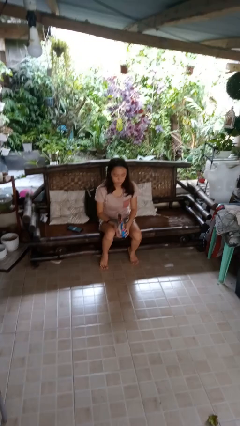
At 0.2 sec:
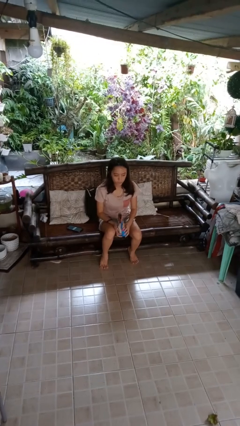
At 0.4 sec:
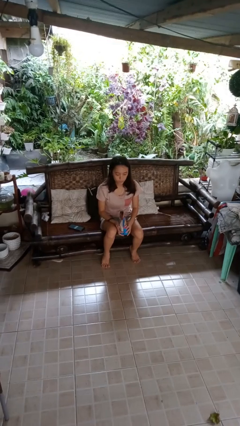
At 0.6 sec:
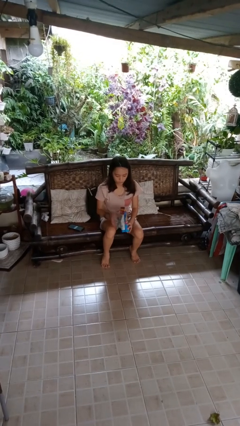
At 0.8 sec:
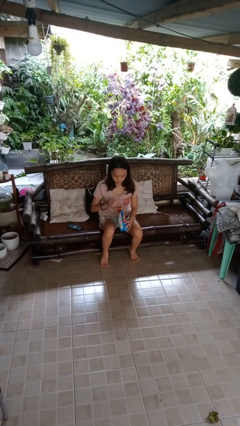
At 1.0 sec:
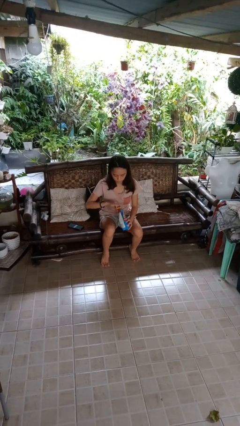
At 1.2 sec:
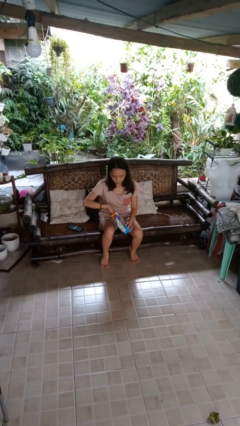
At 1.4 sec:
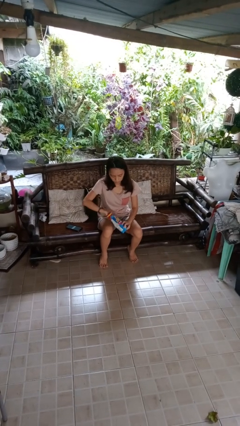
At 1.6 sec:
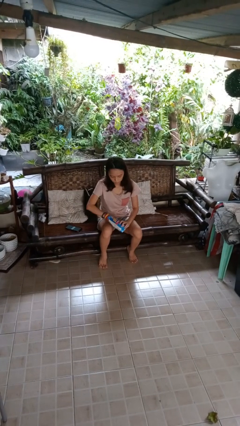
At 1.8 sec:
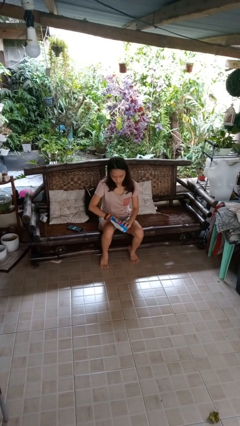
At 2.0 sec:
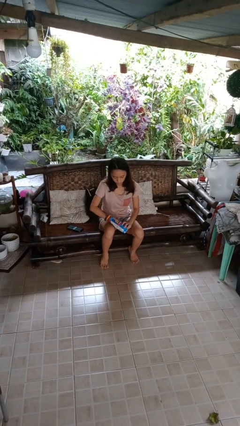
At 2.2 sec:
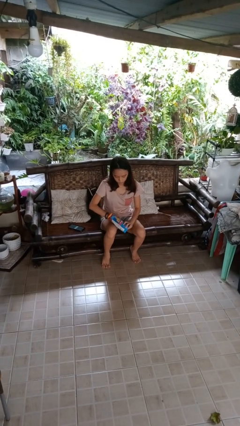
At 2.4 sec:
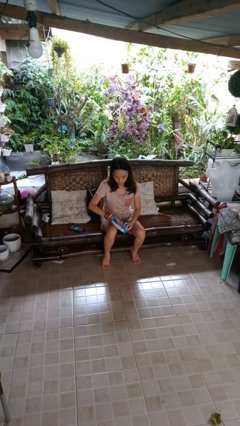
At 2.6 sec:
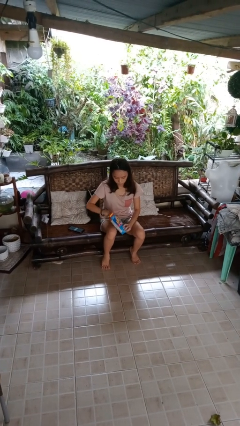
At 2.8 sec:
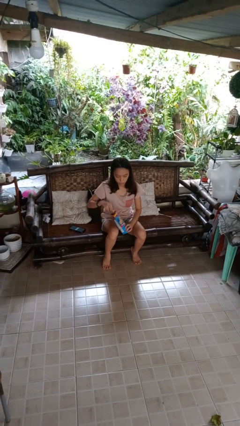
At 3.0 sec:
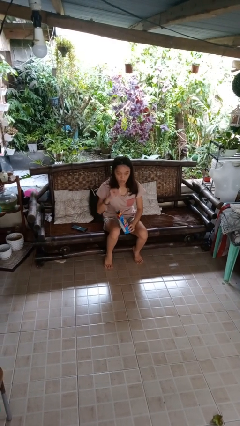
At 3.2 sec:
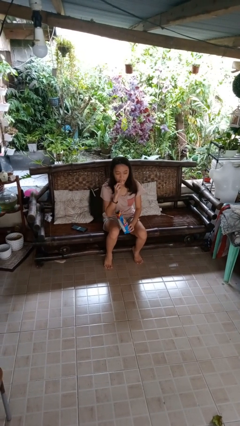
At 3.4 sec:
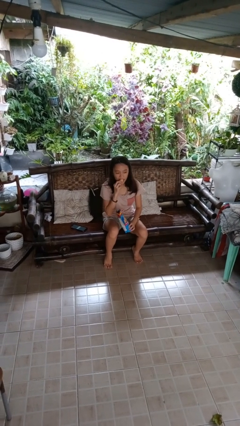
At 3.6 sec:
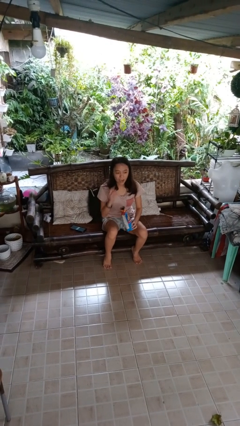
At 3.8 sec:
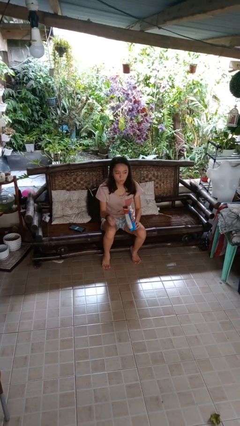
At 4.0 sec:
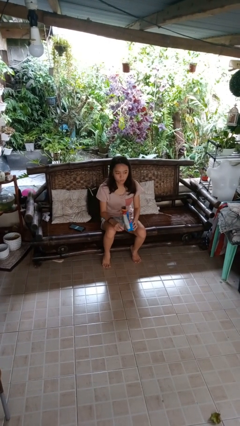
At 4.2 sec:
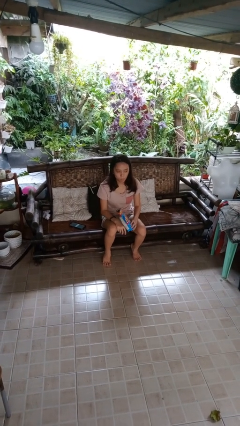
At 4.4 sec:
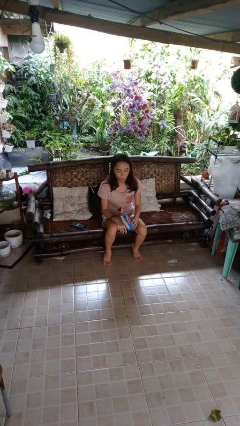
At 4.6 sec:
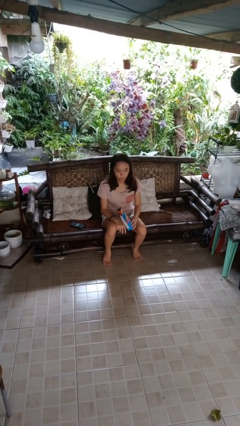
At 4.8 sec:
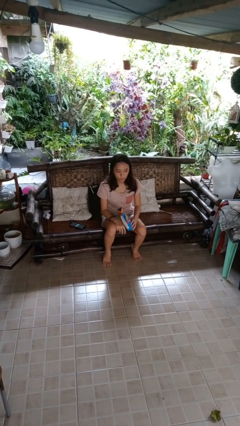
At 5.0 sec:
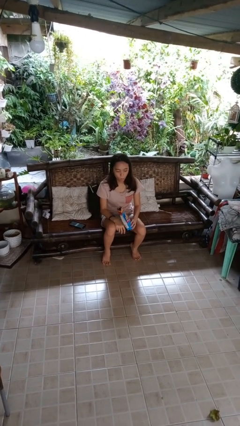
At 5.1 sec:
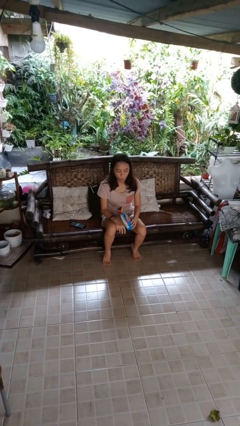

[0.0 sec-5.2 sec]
person eats snack from bag

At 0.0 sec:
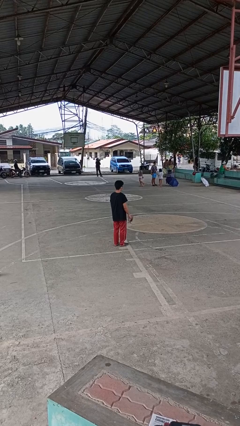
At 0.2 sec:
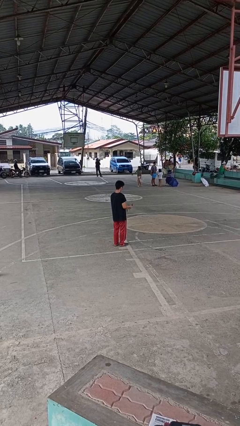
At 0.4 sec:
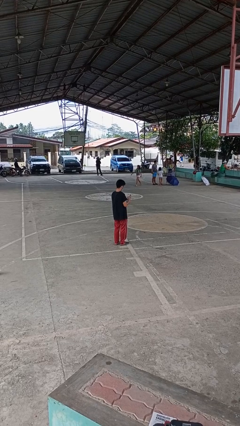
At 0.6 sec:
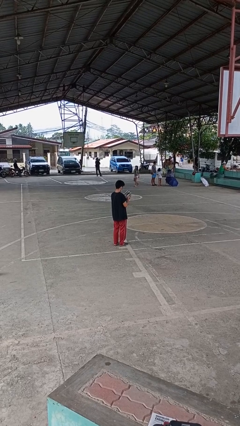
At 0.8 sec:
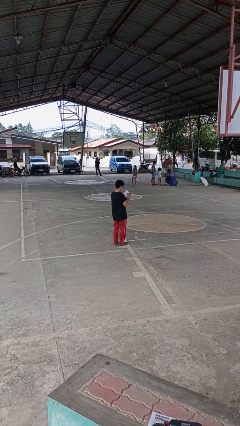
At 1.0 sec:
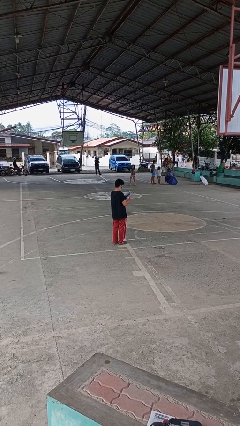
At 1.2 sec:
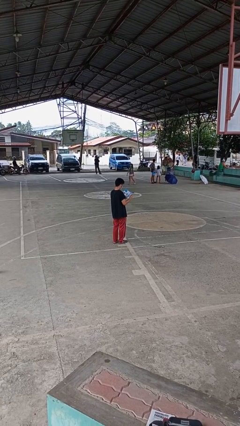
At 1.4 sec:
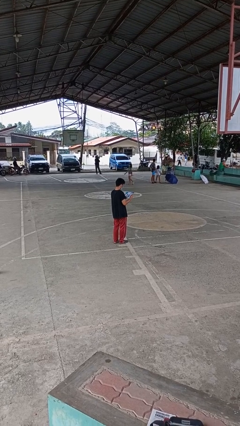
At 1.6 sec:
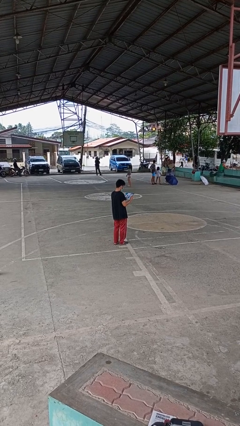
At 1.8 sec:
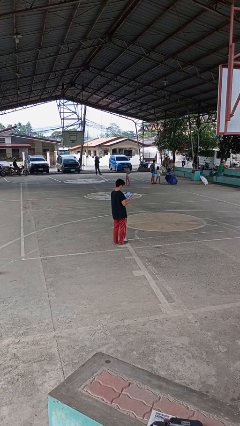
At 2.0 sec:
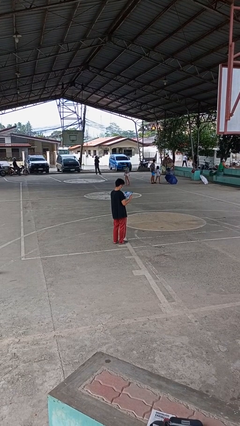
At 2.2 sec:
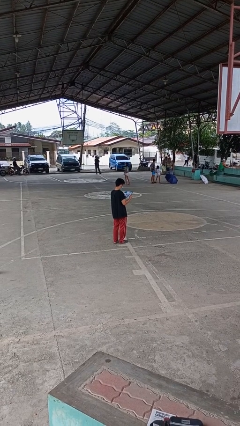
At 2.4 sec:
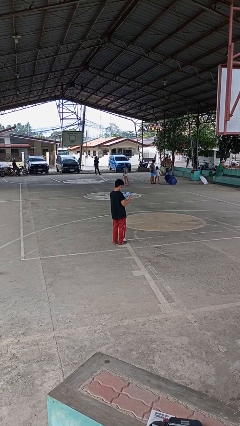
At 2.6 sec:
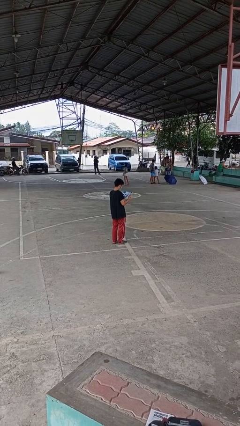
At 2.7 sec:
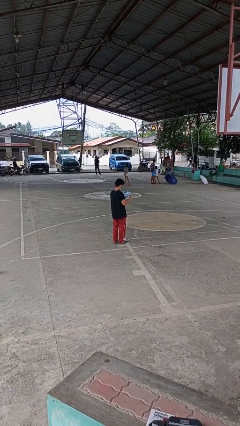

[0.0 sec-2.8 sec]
person reads magazine

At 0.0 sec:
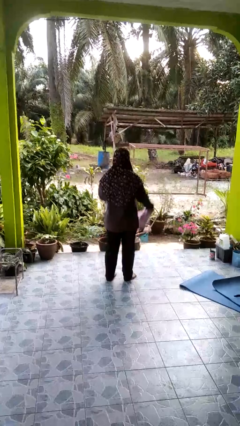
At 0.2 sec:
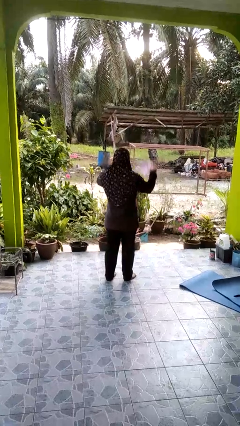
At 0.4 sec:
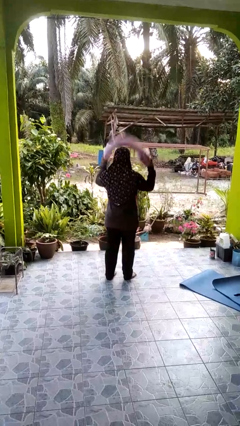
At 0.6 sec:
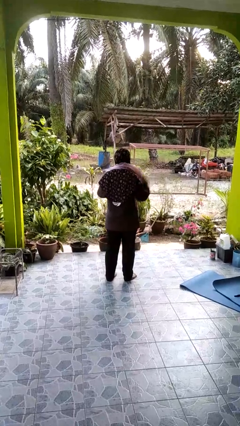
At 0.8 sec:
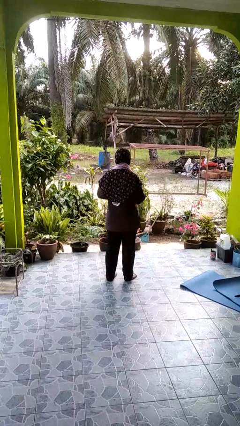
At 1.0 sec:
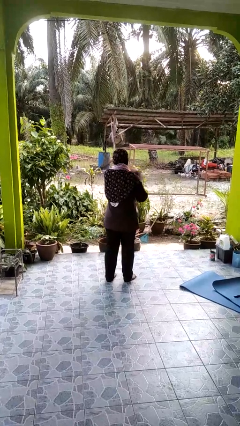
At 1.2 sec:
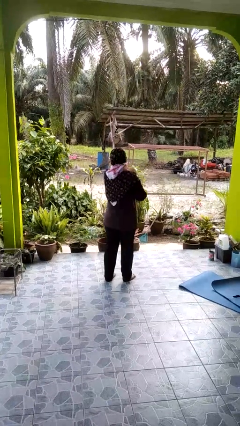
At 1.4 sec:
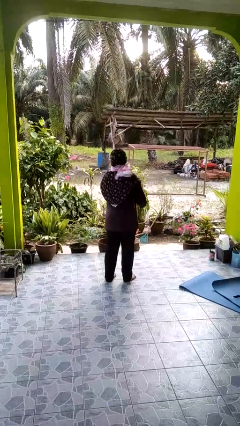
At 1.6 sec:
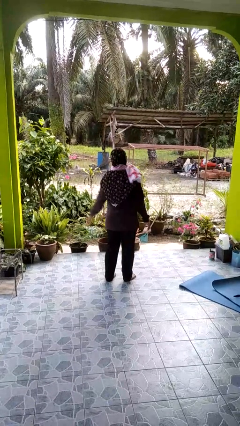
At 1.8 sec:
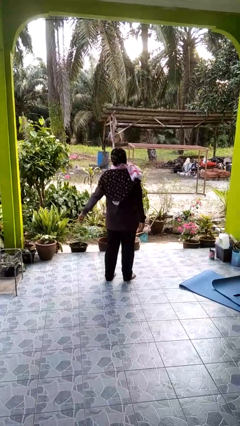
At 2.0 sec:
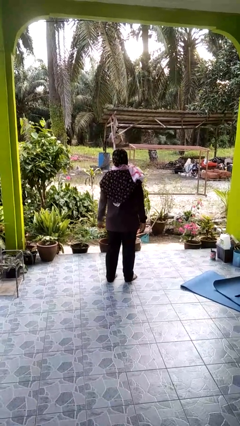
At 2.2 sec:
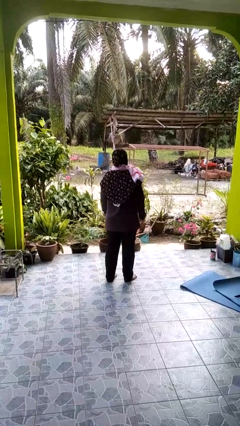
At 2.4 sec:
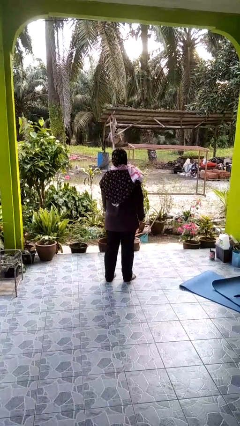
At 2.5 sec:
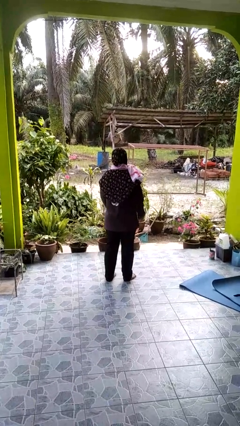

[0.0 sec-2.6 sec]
person puts on scarf

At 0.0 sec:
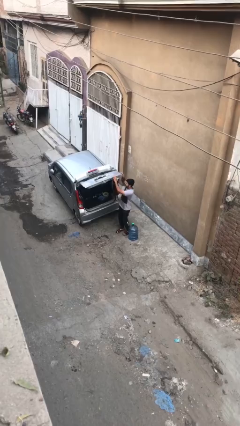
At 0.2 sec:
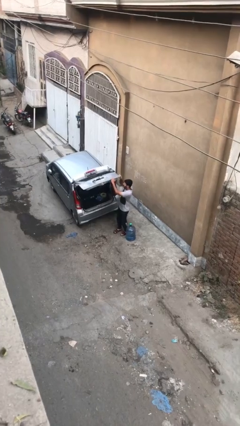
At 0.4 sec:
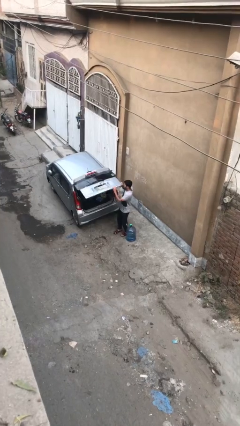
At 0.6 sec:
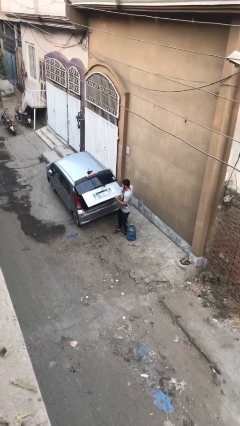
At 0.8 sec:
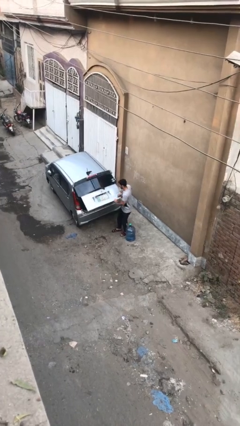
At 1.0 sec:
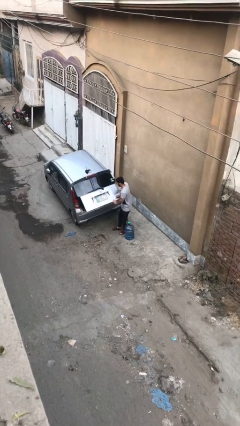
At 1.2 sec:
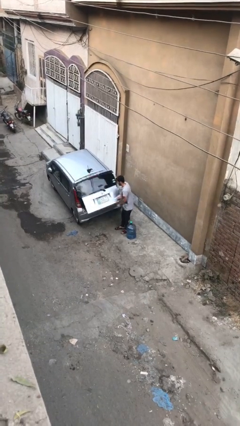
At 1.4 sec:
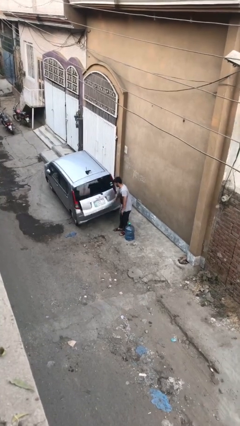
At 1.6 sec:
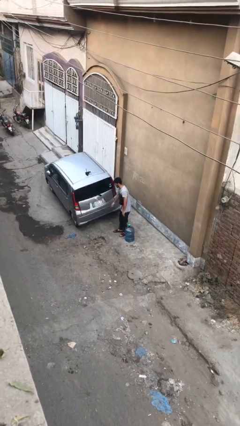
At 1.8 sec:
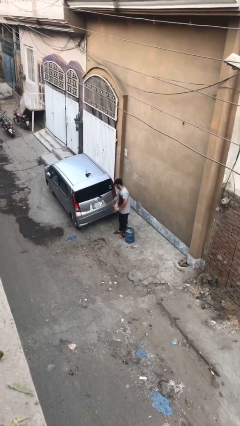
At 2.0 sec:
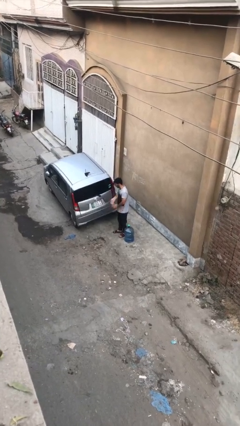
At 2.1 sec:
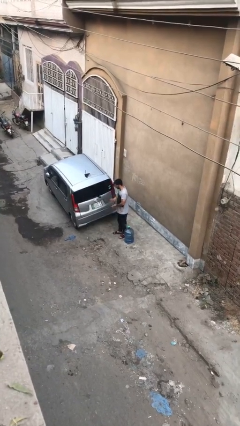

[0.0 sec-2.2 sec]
person closes car trunk

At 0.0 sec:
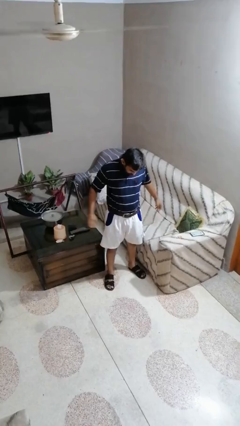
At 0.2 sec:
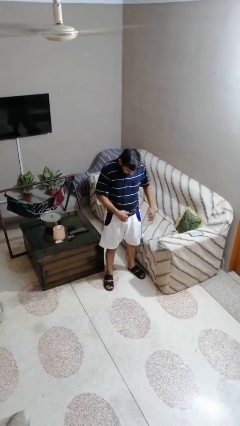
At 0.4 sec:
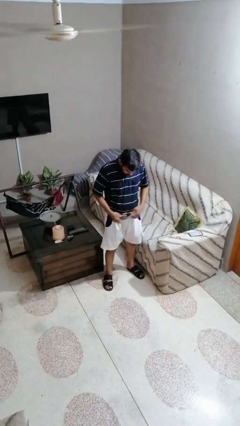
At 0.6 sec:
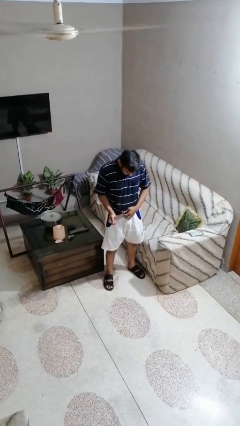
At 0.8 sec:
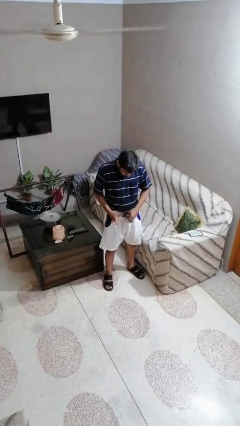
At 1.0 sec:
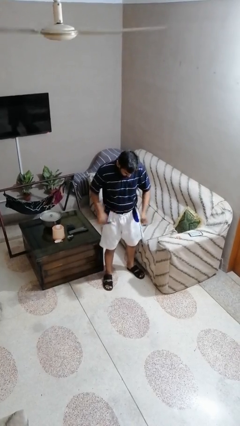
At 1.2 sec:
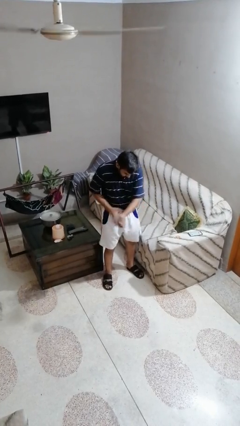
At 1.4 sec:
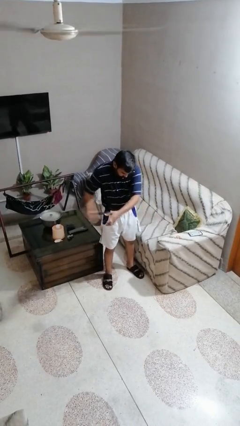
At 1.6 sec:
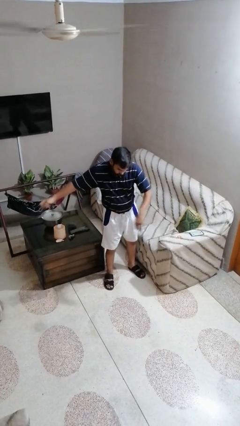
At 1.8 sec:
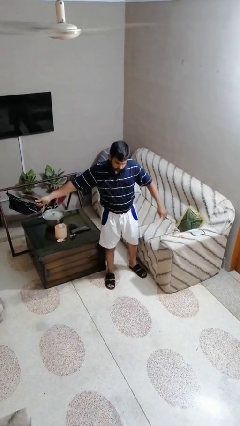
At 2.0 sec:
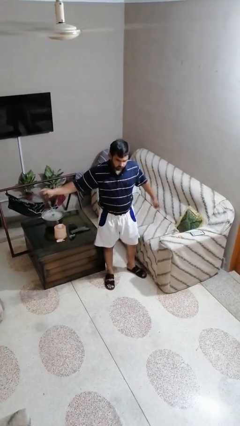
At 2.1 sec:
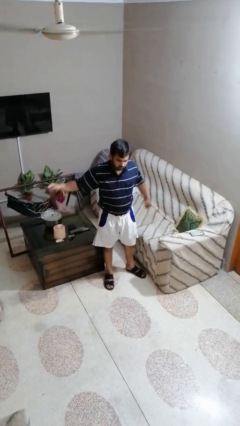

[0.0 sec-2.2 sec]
person takes off belt

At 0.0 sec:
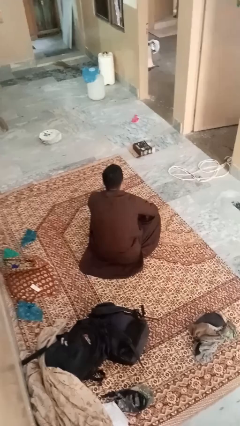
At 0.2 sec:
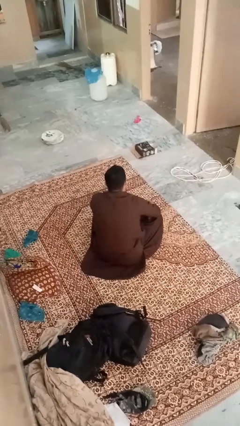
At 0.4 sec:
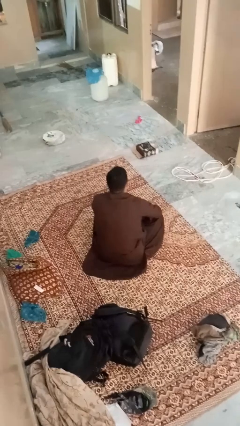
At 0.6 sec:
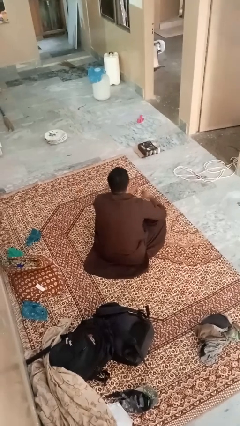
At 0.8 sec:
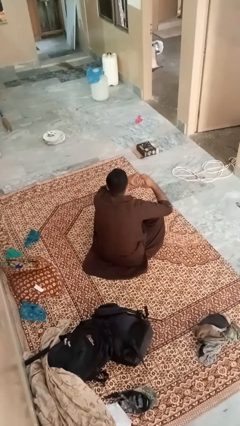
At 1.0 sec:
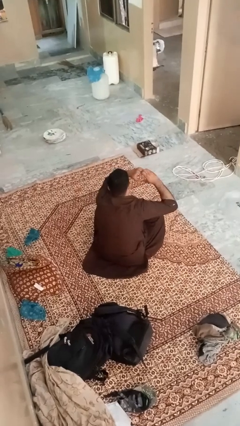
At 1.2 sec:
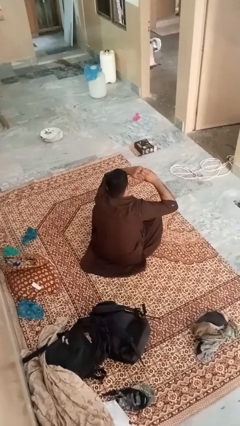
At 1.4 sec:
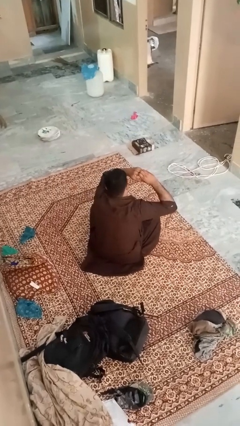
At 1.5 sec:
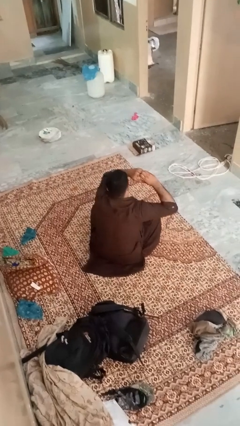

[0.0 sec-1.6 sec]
person gestures heart

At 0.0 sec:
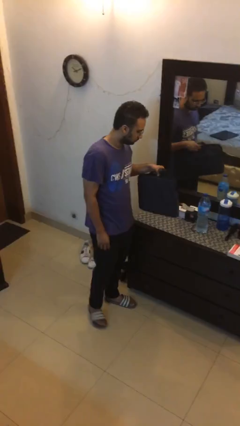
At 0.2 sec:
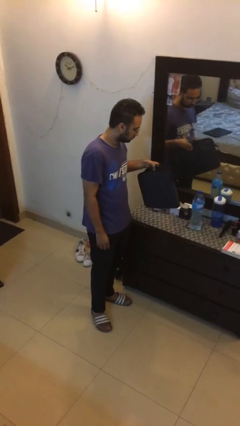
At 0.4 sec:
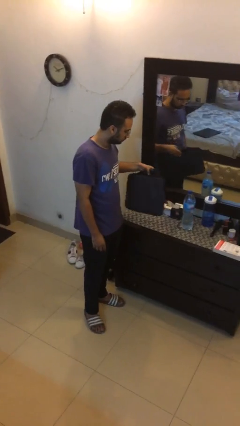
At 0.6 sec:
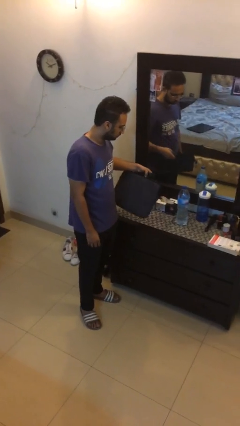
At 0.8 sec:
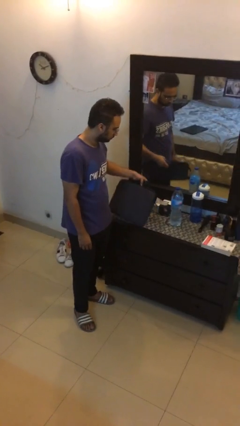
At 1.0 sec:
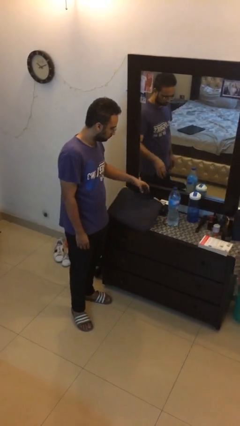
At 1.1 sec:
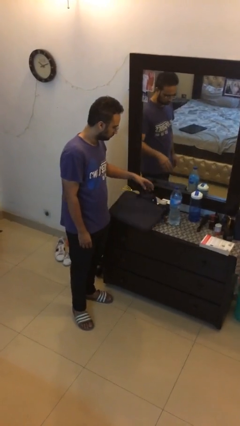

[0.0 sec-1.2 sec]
person puts down object on table
